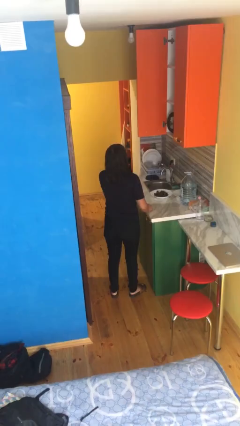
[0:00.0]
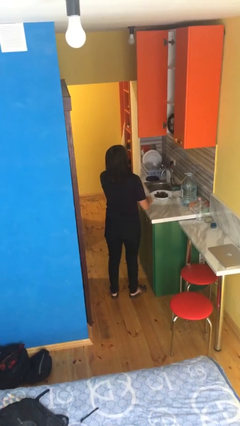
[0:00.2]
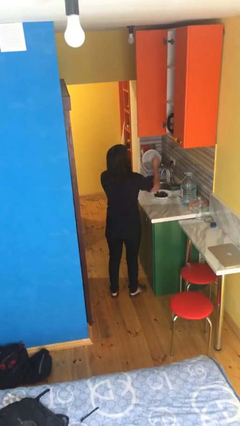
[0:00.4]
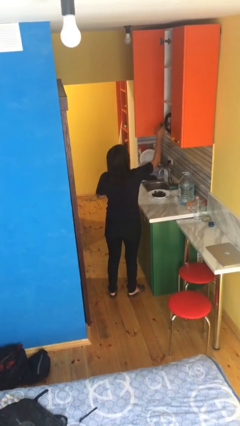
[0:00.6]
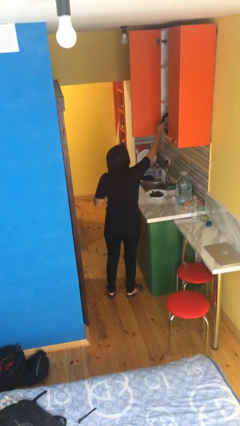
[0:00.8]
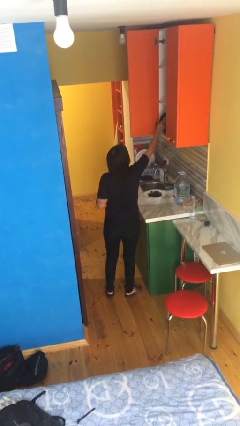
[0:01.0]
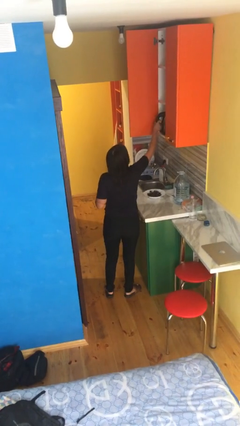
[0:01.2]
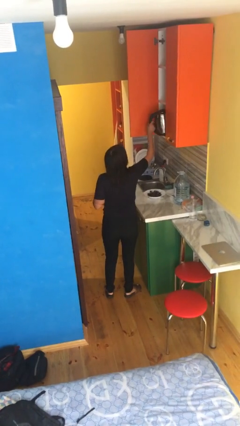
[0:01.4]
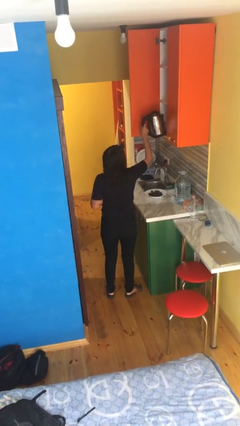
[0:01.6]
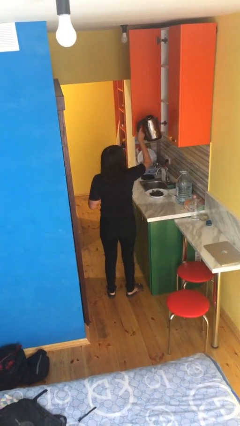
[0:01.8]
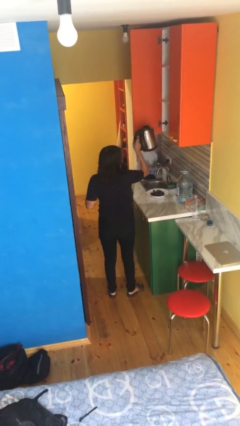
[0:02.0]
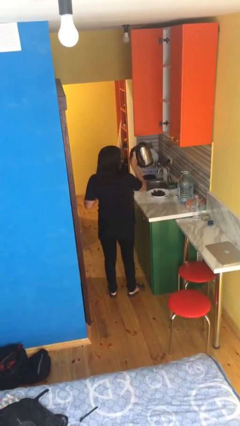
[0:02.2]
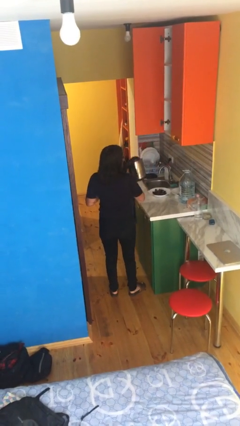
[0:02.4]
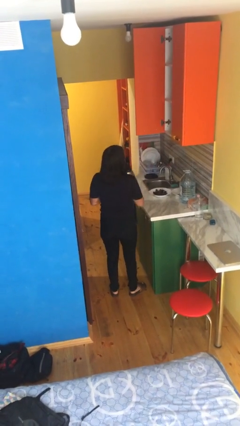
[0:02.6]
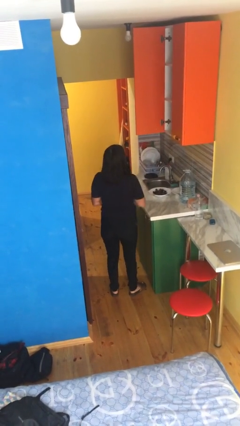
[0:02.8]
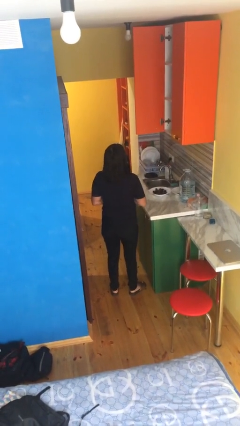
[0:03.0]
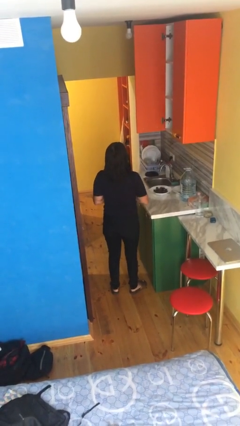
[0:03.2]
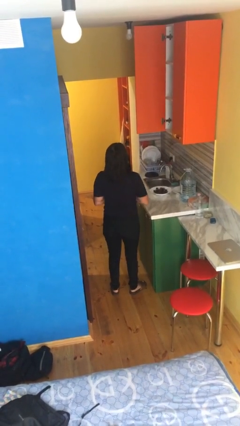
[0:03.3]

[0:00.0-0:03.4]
person picks up object from cabinet

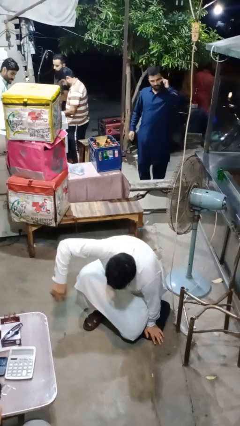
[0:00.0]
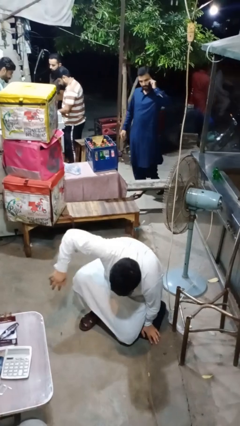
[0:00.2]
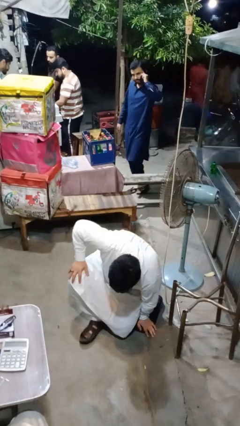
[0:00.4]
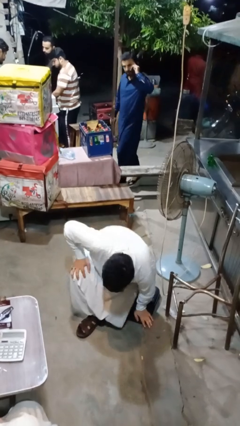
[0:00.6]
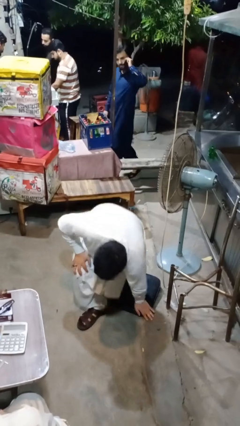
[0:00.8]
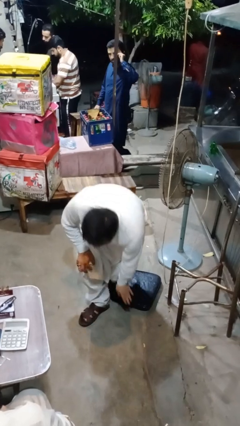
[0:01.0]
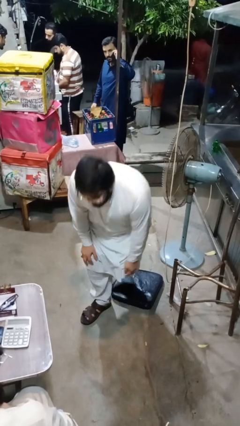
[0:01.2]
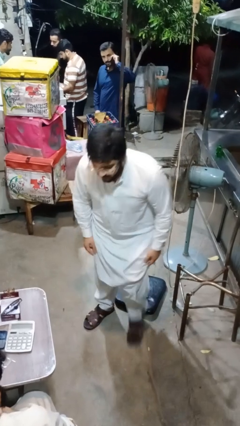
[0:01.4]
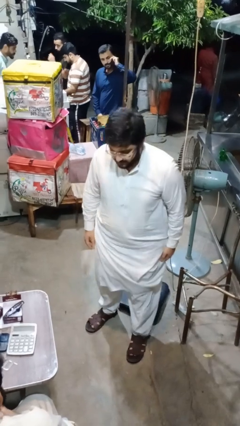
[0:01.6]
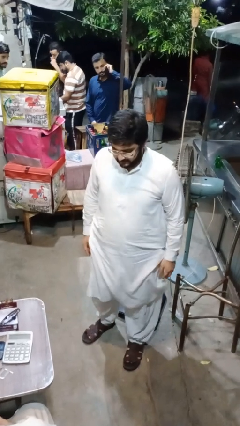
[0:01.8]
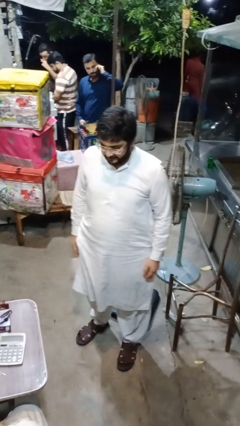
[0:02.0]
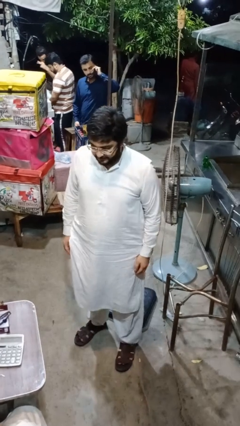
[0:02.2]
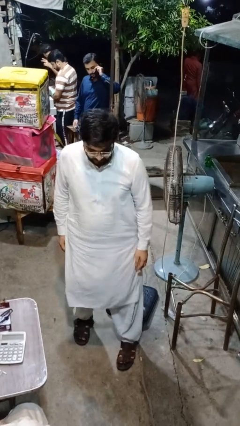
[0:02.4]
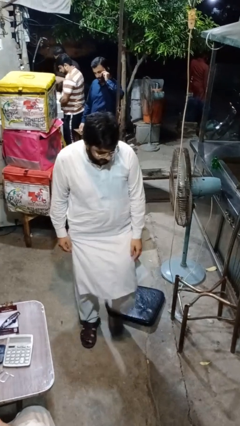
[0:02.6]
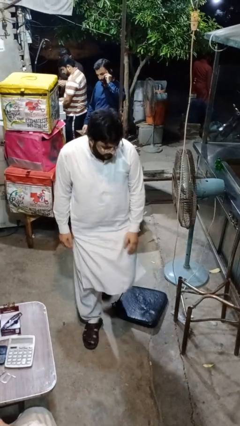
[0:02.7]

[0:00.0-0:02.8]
person stands up from floor

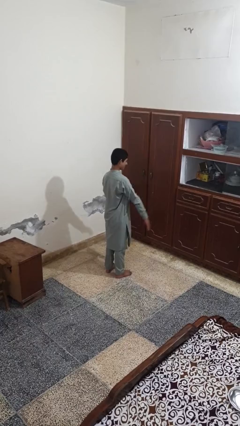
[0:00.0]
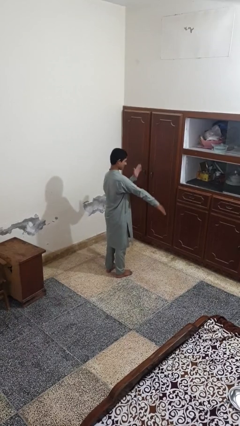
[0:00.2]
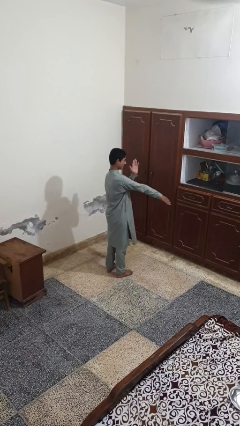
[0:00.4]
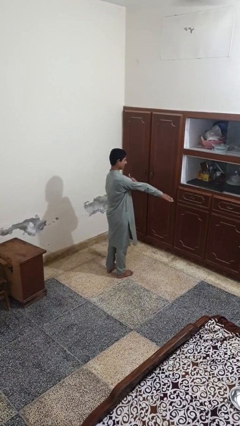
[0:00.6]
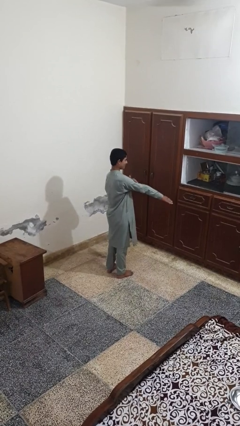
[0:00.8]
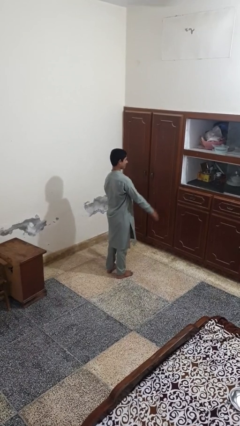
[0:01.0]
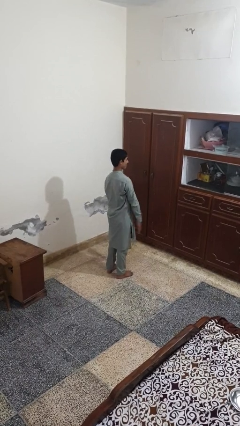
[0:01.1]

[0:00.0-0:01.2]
person swats bug

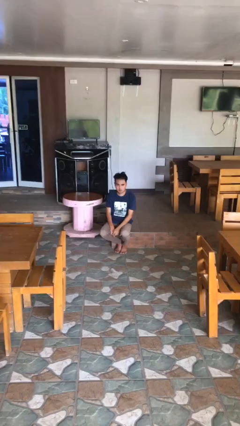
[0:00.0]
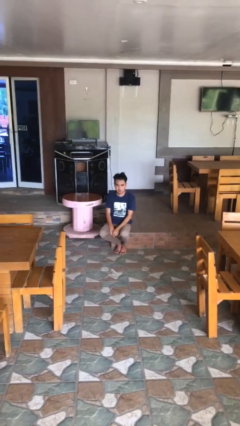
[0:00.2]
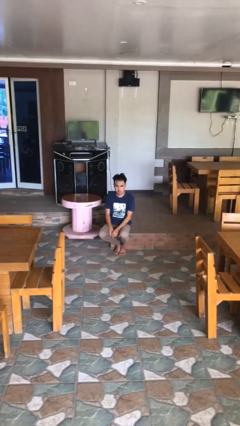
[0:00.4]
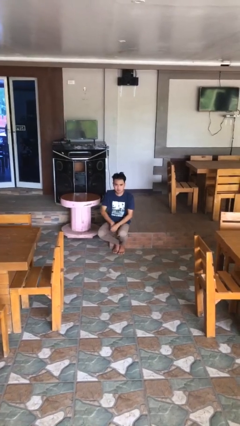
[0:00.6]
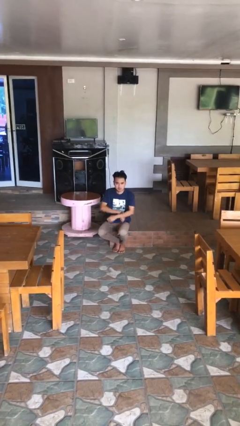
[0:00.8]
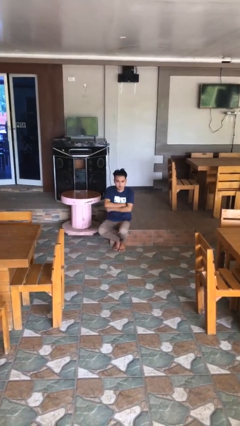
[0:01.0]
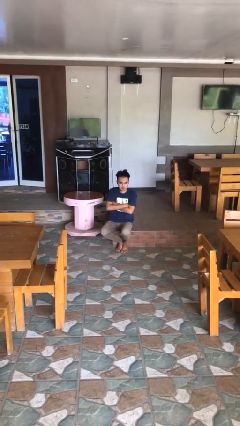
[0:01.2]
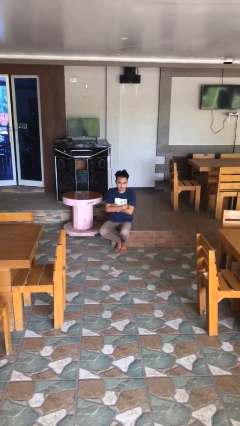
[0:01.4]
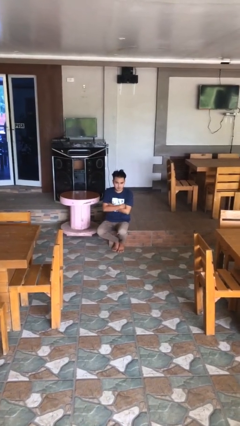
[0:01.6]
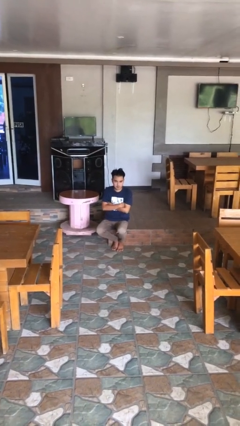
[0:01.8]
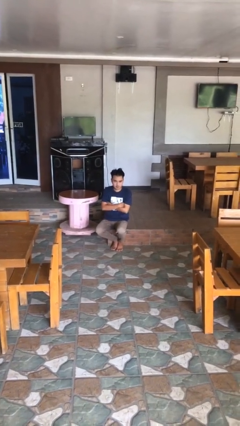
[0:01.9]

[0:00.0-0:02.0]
person crosses arms

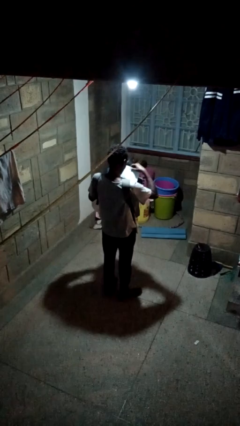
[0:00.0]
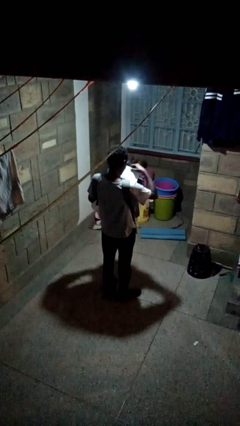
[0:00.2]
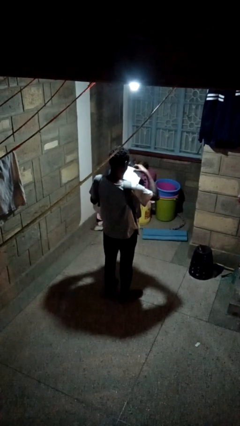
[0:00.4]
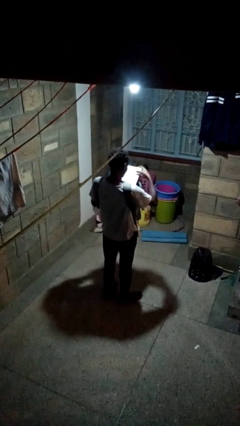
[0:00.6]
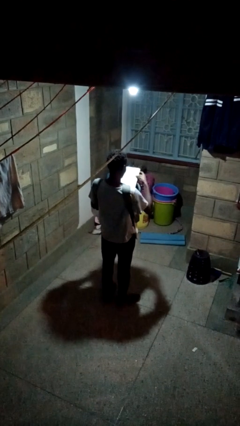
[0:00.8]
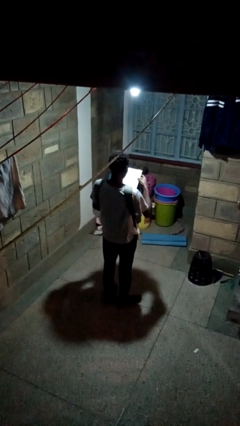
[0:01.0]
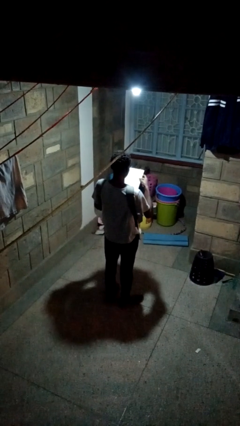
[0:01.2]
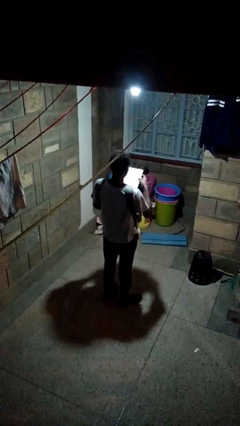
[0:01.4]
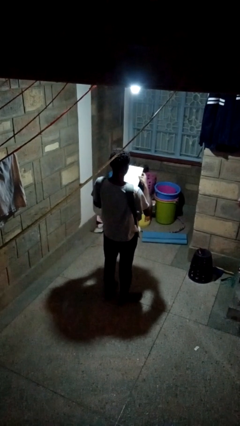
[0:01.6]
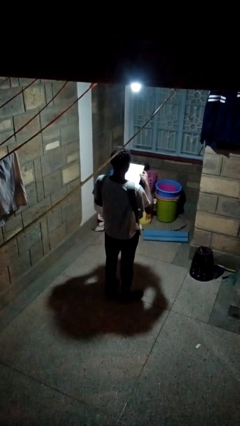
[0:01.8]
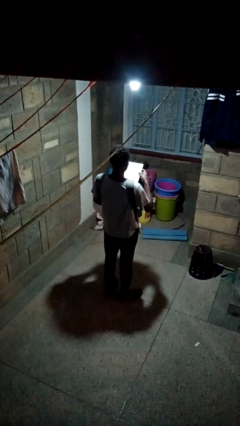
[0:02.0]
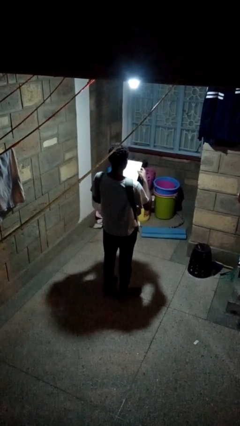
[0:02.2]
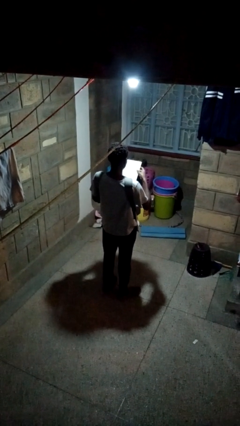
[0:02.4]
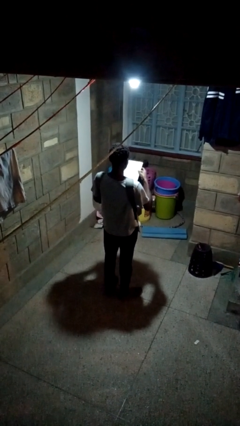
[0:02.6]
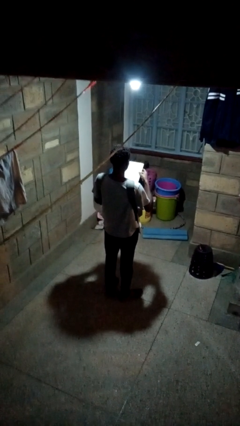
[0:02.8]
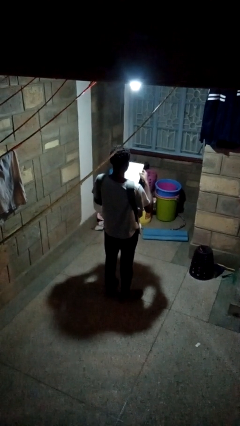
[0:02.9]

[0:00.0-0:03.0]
person takes object from backpack

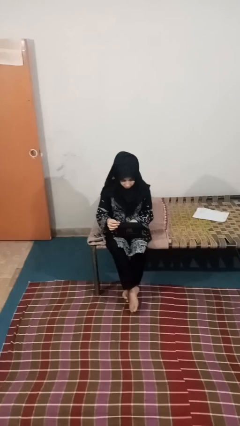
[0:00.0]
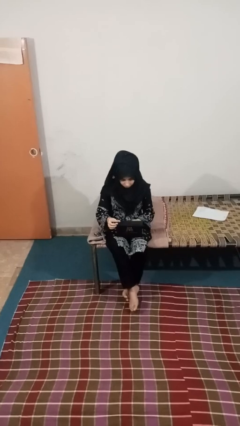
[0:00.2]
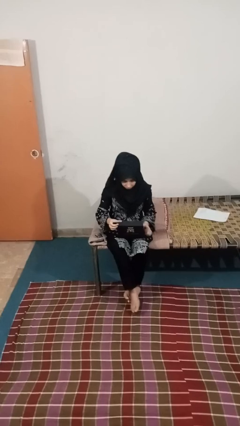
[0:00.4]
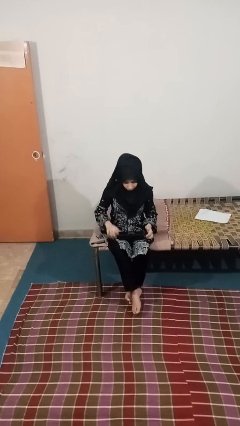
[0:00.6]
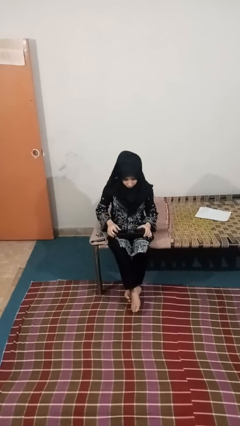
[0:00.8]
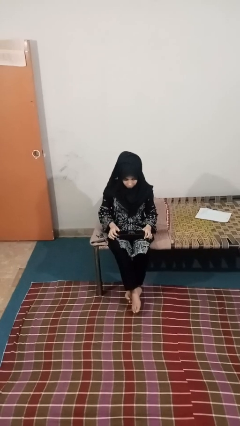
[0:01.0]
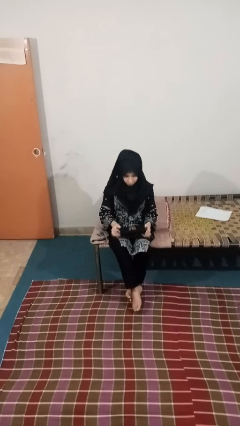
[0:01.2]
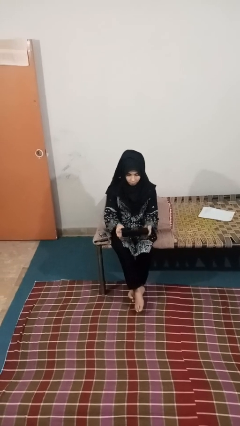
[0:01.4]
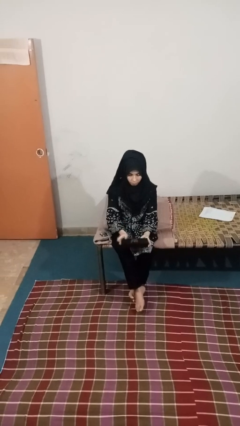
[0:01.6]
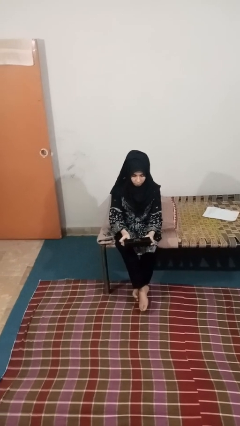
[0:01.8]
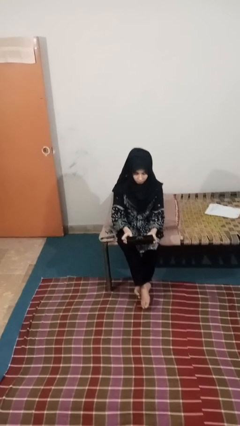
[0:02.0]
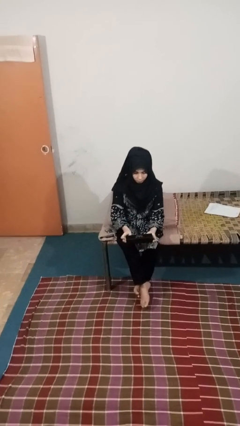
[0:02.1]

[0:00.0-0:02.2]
person closes jewelry box

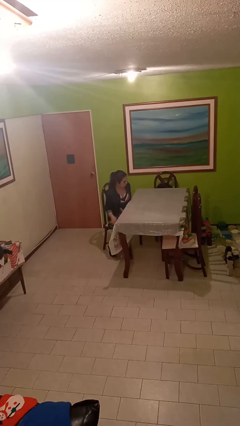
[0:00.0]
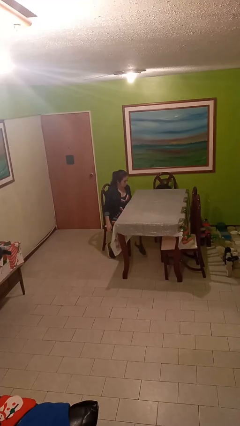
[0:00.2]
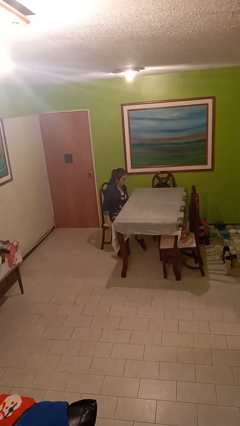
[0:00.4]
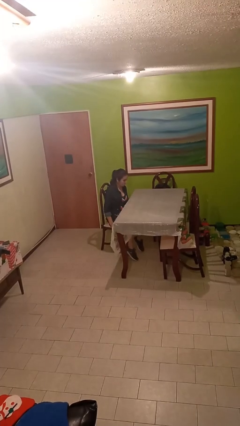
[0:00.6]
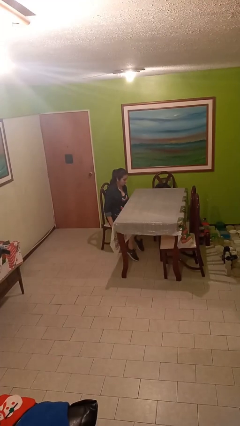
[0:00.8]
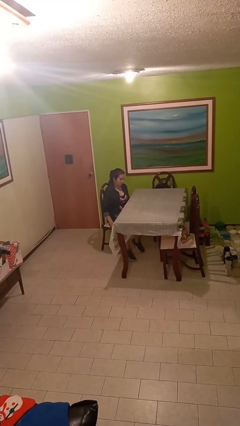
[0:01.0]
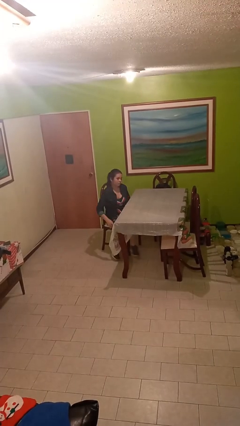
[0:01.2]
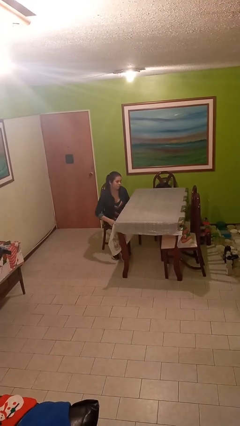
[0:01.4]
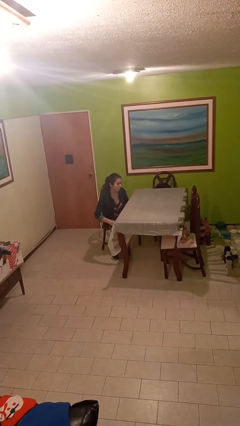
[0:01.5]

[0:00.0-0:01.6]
person sits down

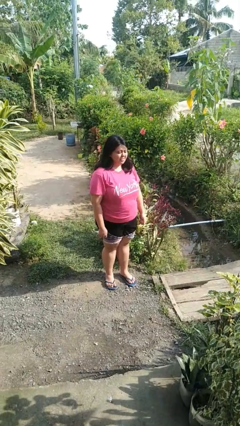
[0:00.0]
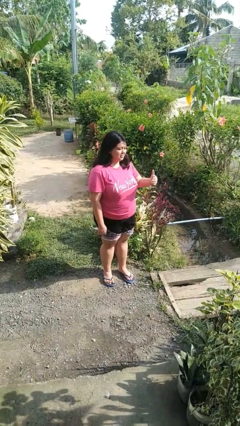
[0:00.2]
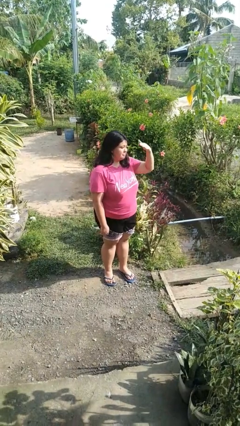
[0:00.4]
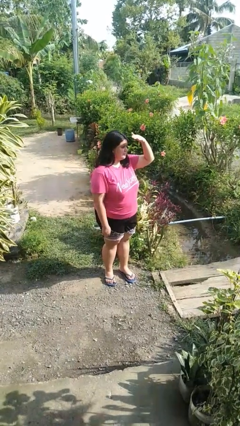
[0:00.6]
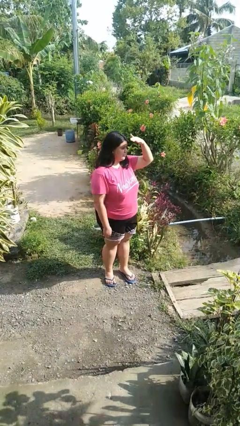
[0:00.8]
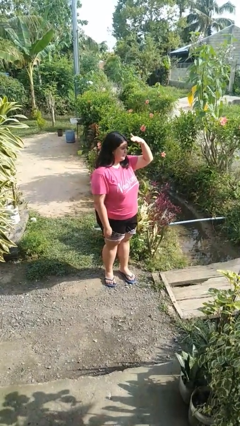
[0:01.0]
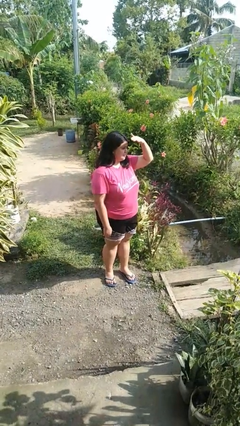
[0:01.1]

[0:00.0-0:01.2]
person shades eyes
